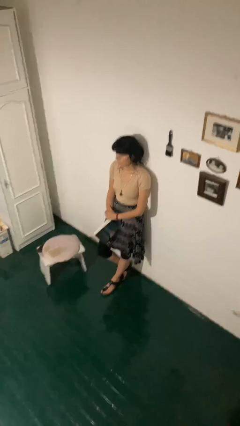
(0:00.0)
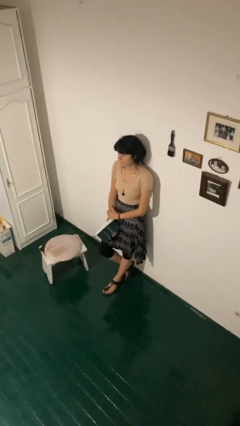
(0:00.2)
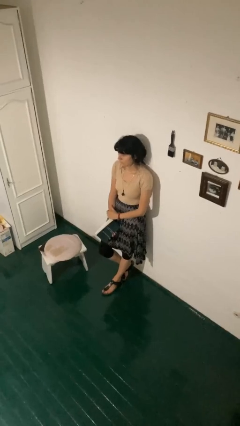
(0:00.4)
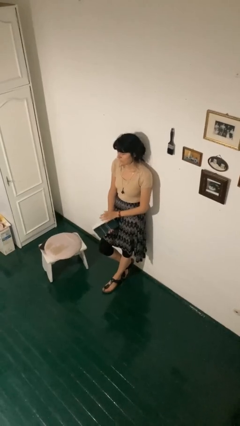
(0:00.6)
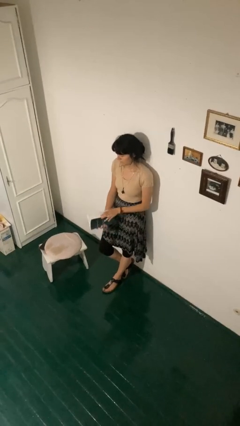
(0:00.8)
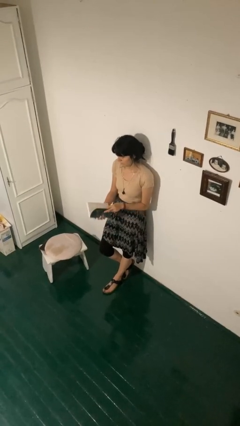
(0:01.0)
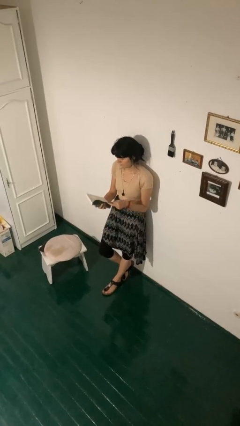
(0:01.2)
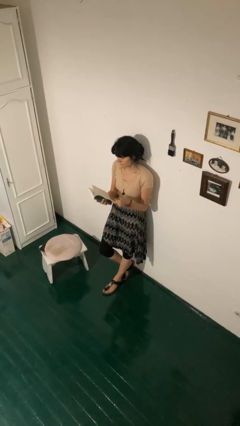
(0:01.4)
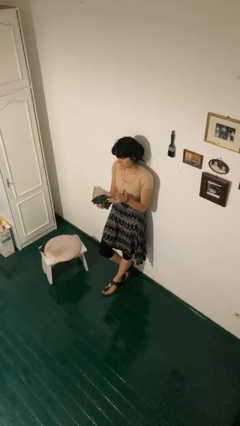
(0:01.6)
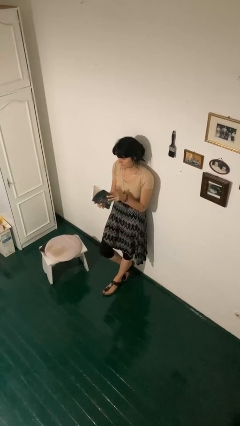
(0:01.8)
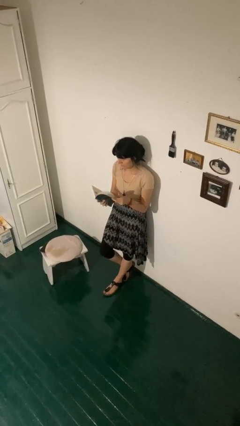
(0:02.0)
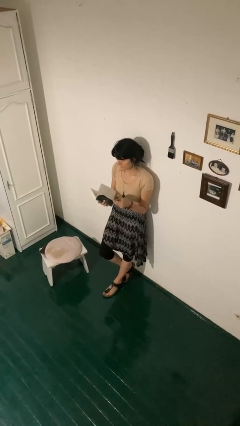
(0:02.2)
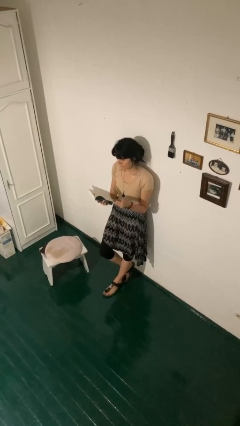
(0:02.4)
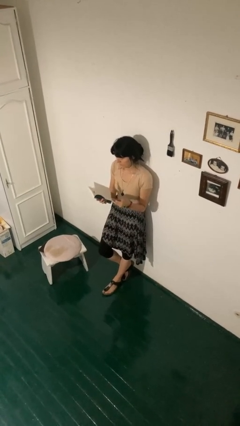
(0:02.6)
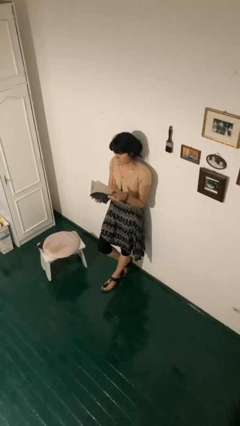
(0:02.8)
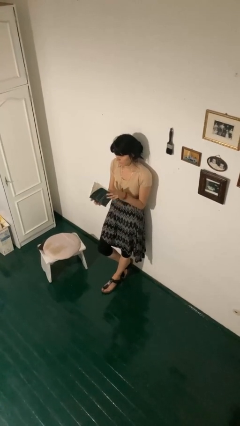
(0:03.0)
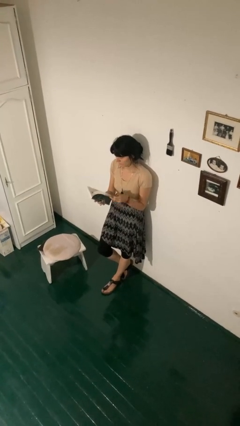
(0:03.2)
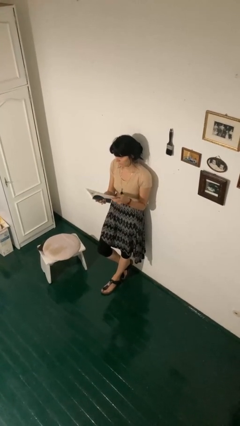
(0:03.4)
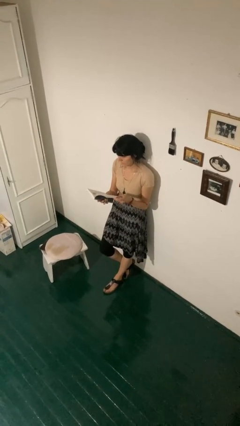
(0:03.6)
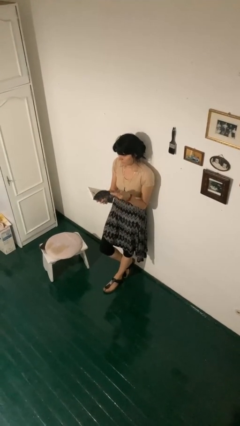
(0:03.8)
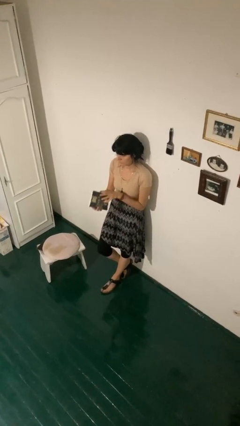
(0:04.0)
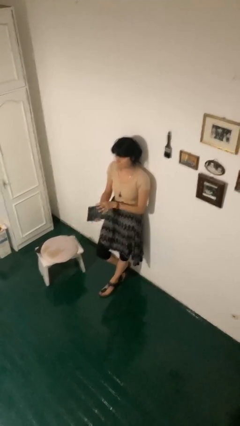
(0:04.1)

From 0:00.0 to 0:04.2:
person reads book

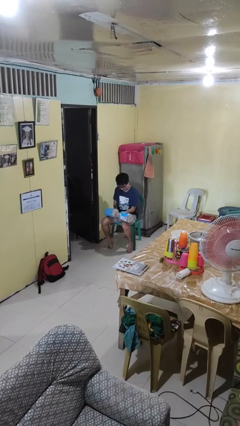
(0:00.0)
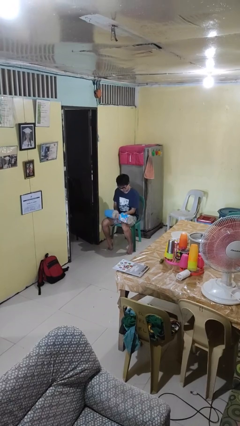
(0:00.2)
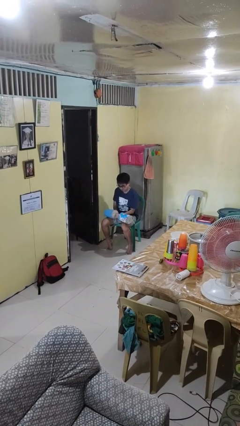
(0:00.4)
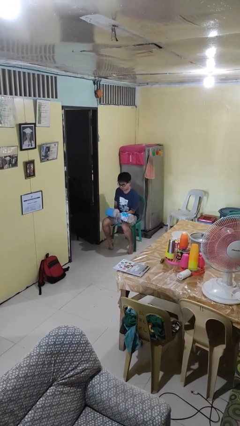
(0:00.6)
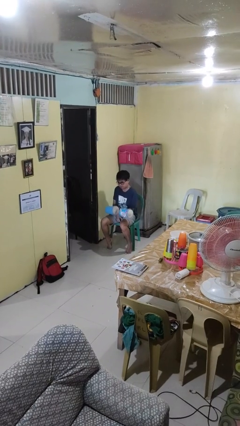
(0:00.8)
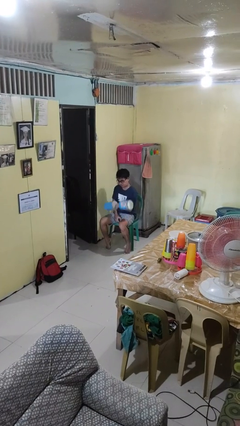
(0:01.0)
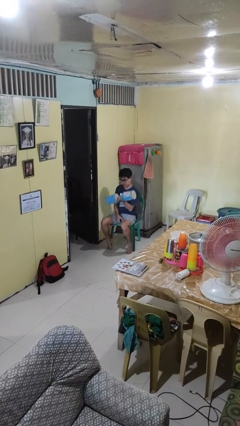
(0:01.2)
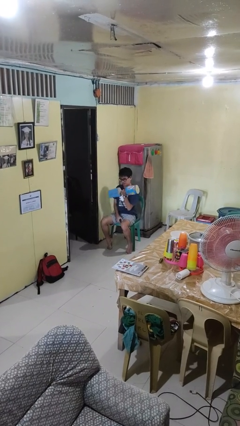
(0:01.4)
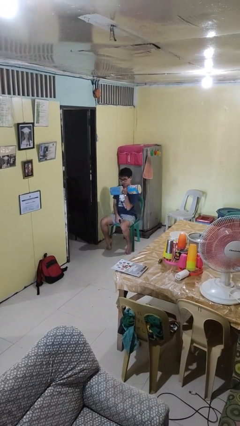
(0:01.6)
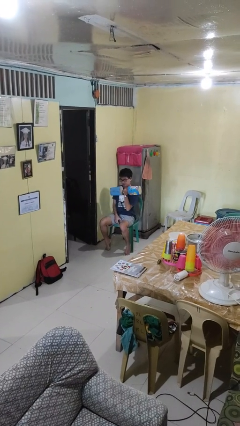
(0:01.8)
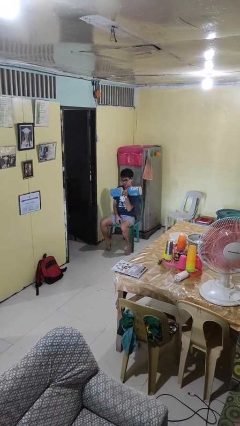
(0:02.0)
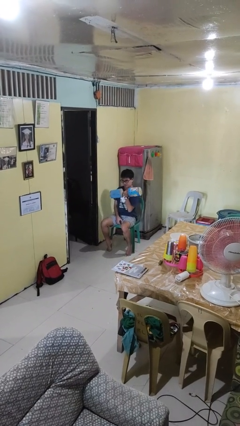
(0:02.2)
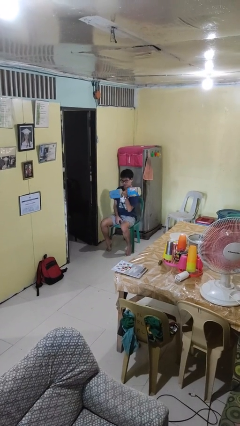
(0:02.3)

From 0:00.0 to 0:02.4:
person lifts dumbbells

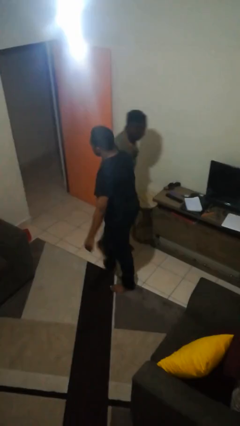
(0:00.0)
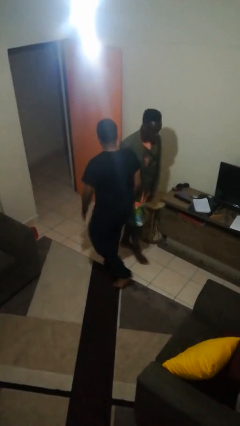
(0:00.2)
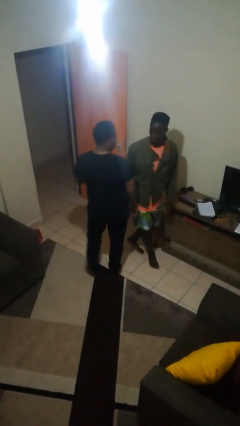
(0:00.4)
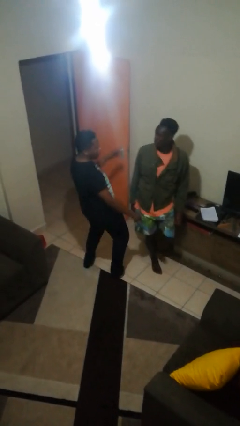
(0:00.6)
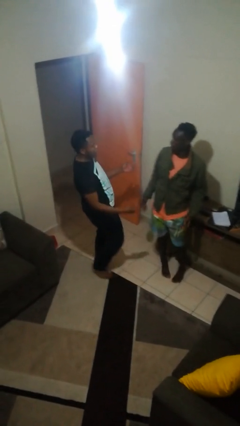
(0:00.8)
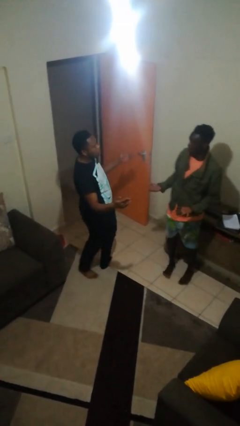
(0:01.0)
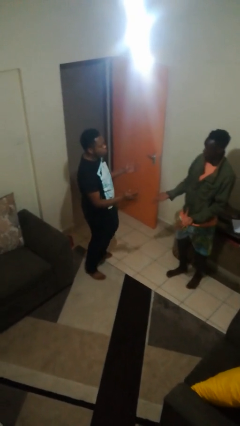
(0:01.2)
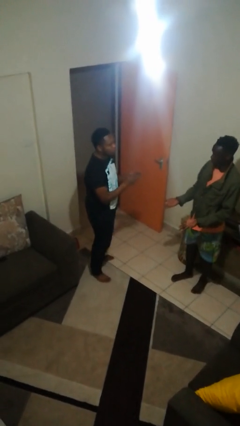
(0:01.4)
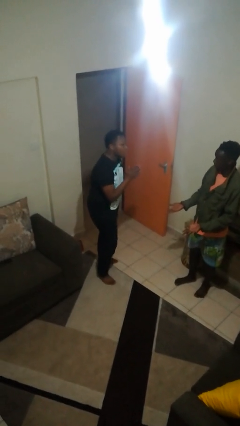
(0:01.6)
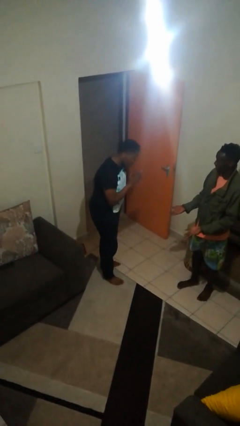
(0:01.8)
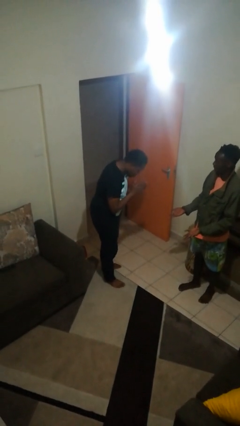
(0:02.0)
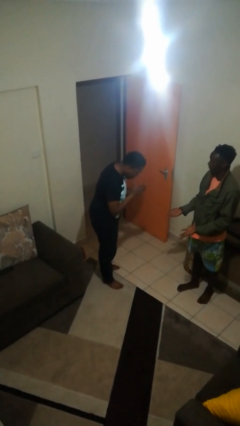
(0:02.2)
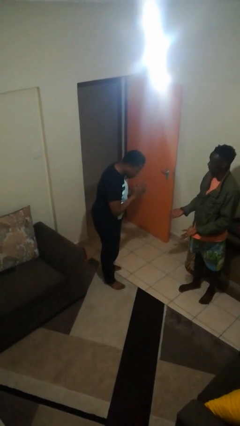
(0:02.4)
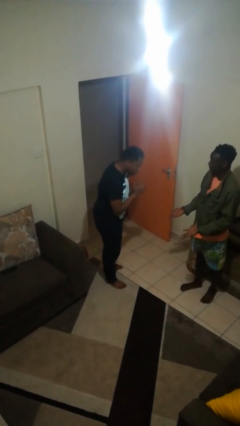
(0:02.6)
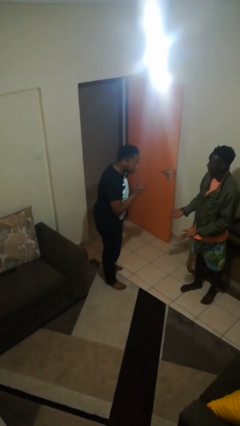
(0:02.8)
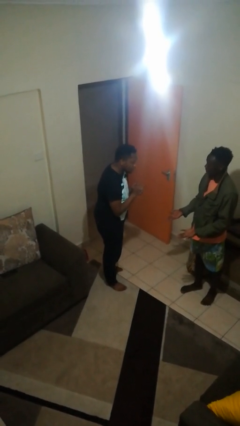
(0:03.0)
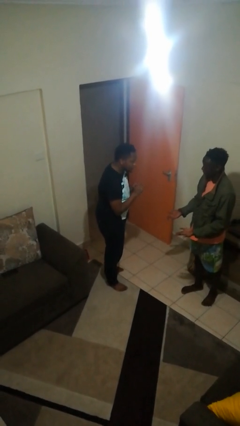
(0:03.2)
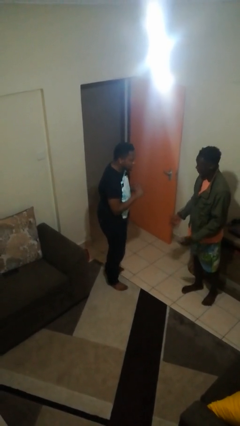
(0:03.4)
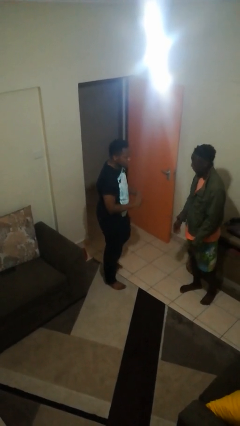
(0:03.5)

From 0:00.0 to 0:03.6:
person bumps into person

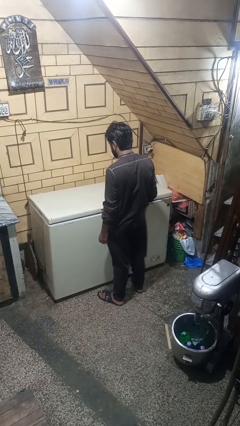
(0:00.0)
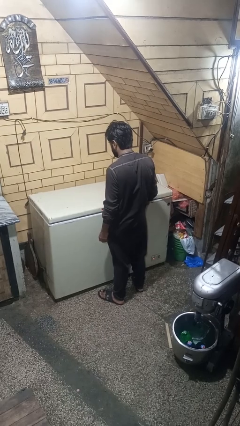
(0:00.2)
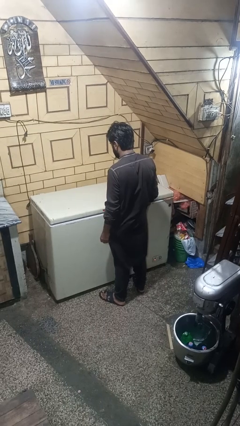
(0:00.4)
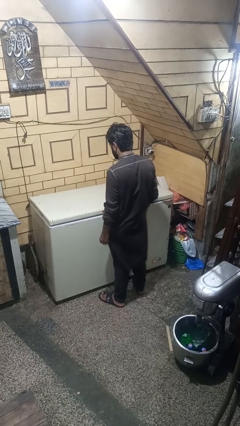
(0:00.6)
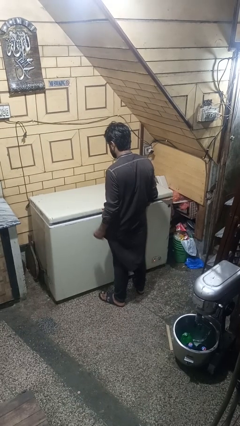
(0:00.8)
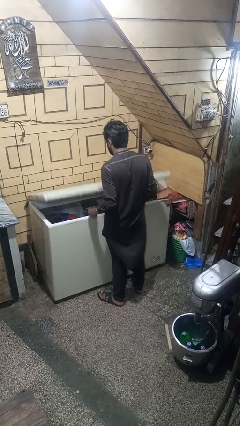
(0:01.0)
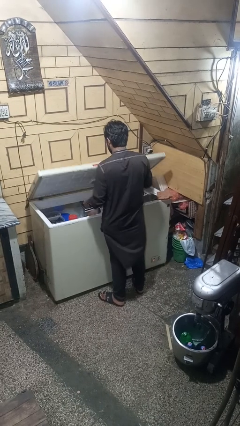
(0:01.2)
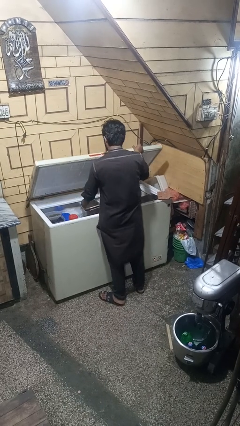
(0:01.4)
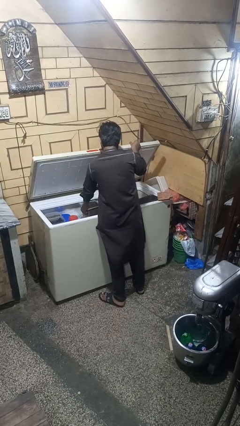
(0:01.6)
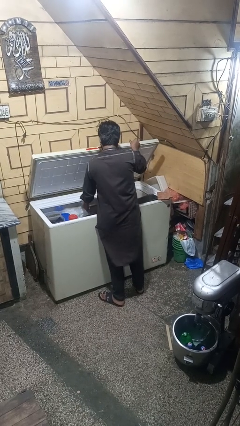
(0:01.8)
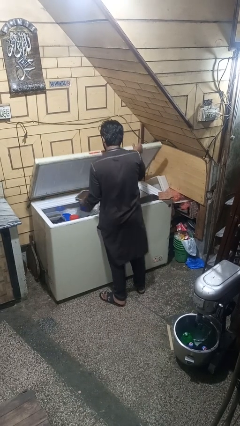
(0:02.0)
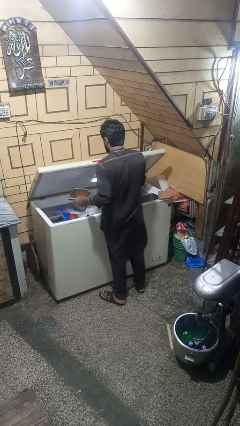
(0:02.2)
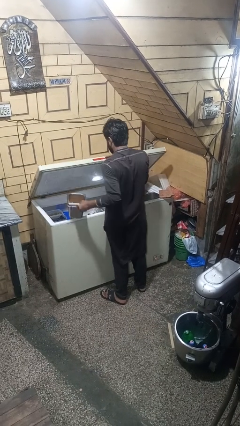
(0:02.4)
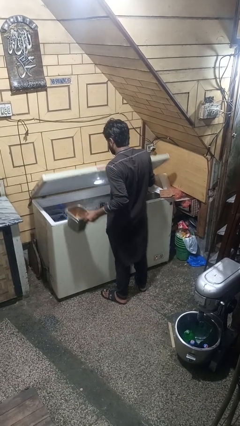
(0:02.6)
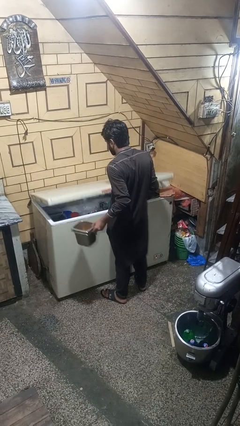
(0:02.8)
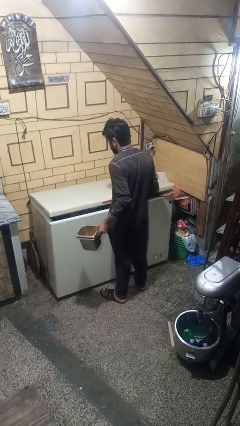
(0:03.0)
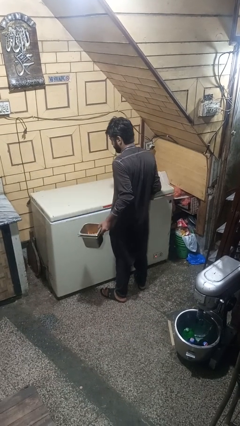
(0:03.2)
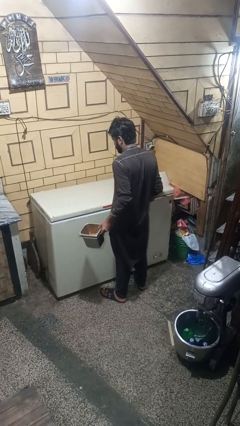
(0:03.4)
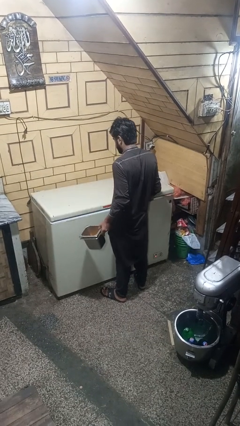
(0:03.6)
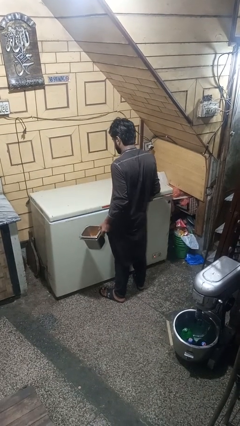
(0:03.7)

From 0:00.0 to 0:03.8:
person takes object from refrigerator

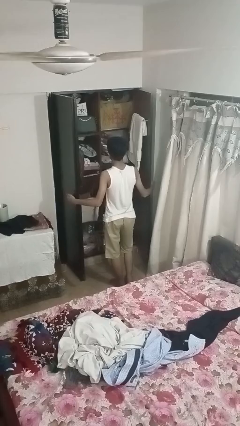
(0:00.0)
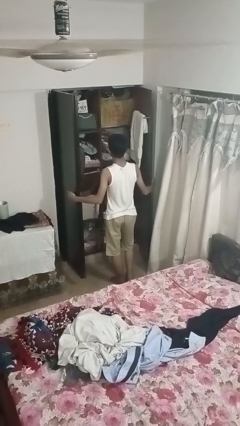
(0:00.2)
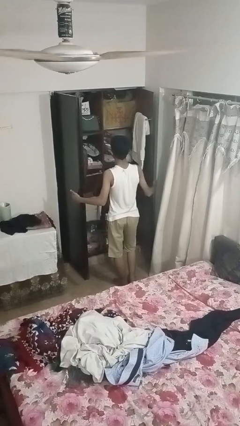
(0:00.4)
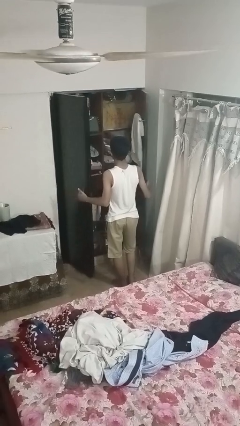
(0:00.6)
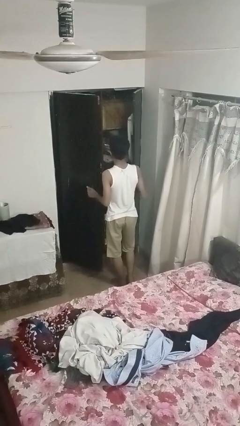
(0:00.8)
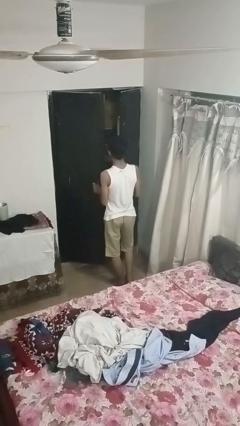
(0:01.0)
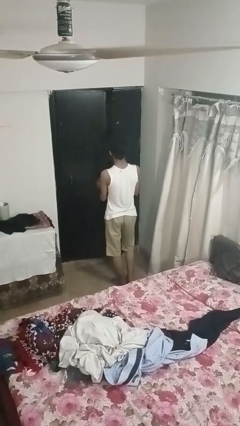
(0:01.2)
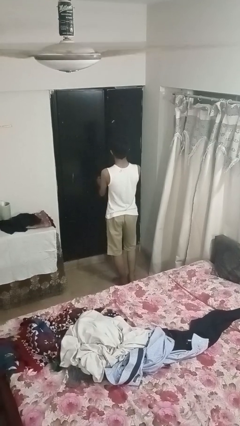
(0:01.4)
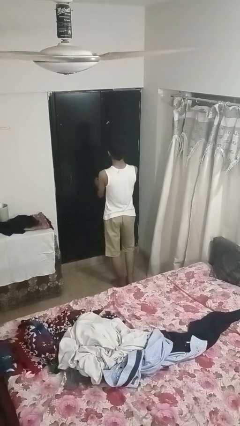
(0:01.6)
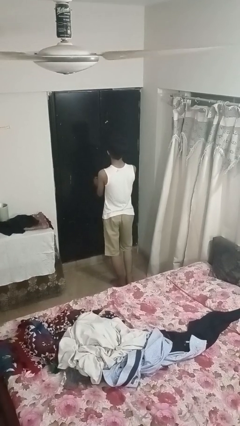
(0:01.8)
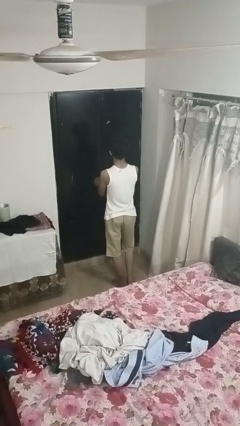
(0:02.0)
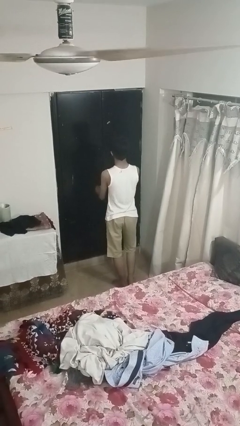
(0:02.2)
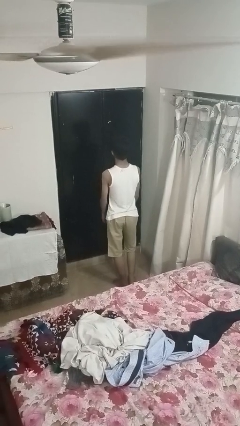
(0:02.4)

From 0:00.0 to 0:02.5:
person closes closet door

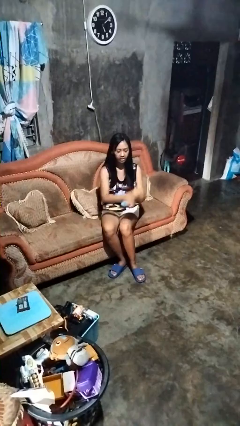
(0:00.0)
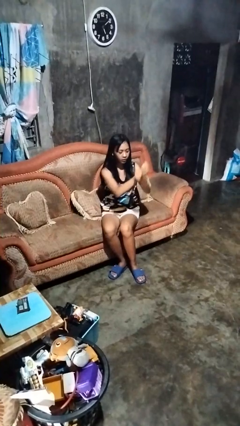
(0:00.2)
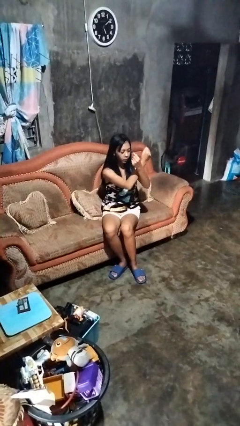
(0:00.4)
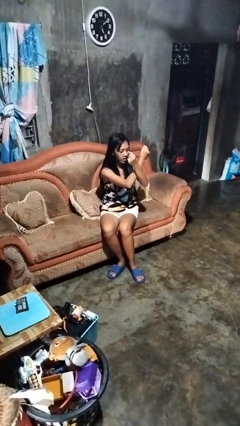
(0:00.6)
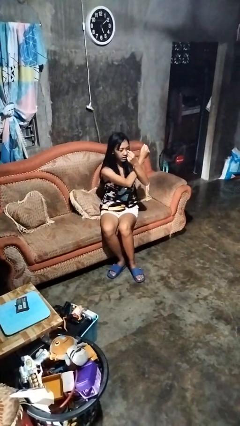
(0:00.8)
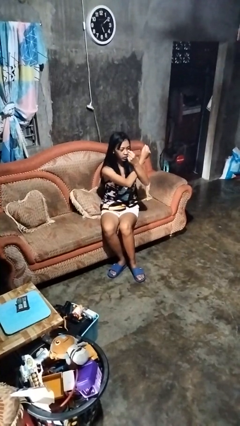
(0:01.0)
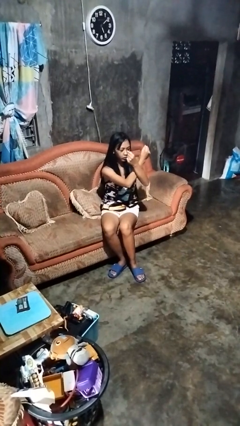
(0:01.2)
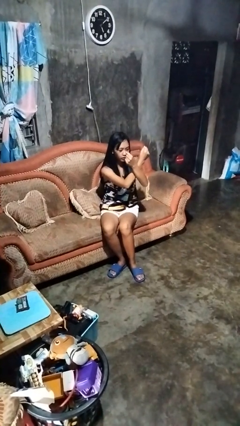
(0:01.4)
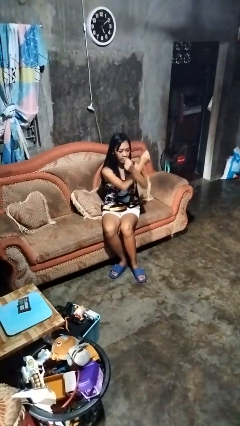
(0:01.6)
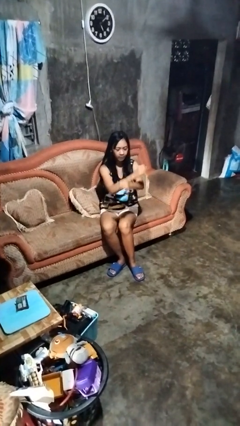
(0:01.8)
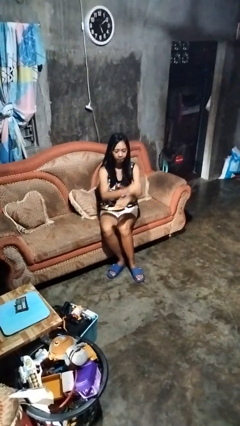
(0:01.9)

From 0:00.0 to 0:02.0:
person gestures arms x
